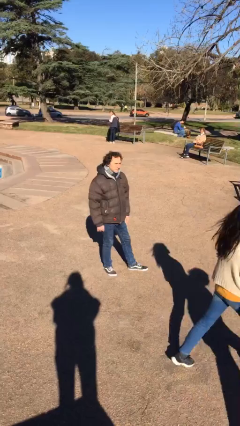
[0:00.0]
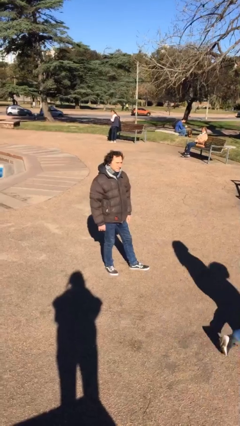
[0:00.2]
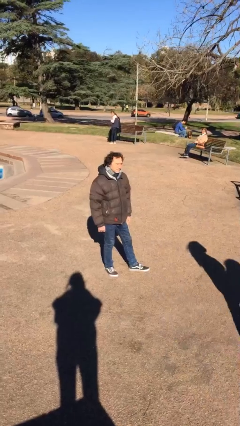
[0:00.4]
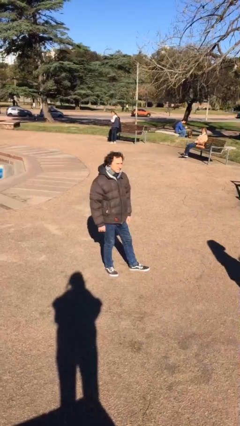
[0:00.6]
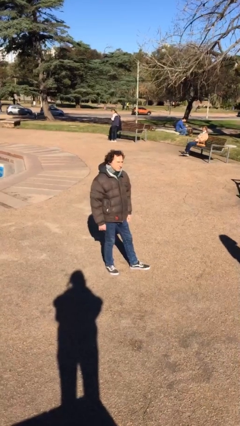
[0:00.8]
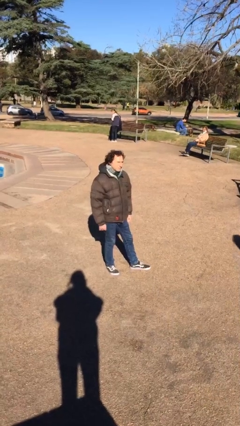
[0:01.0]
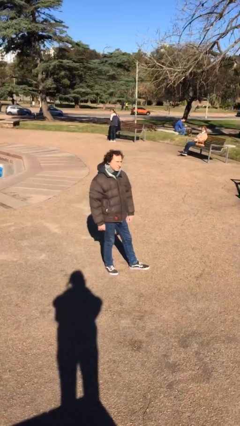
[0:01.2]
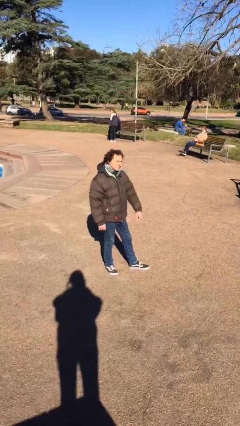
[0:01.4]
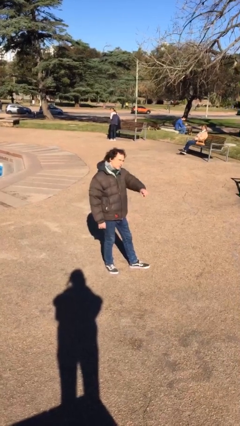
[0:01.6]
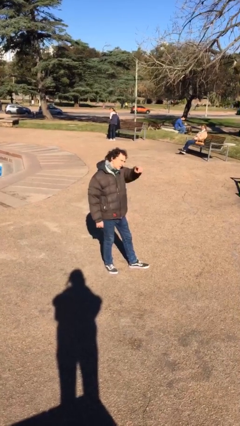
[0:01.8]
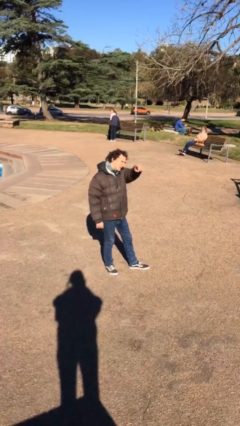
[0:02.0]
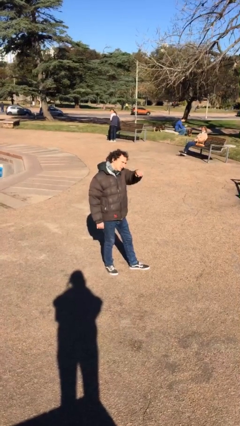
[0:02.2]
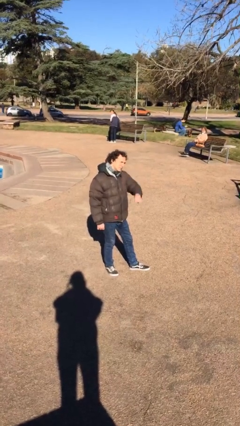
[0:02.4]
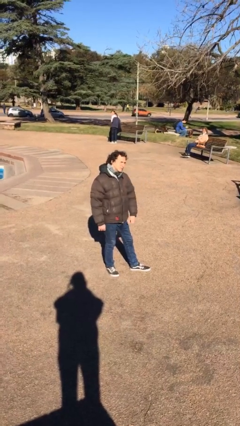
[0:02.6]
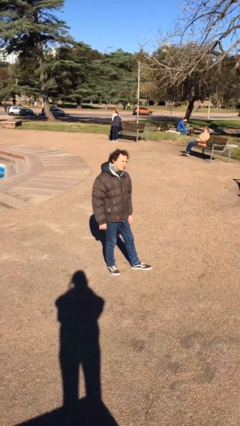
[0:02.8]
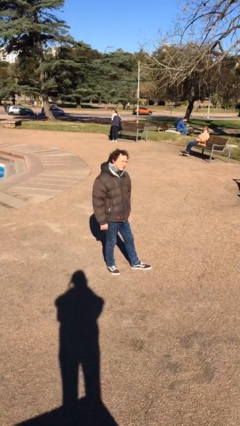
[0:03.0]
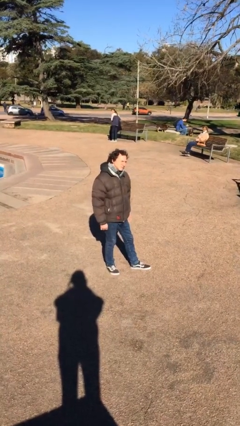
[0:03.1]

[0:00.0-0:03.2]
person points at person

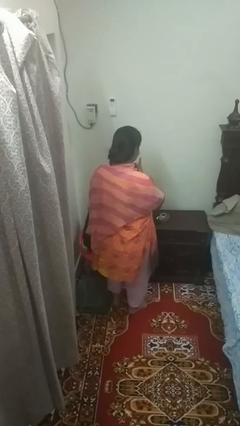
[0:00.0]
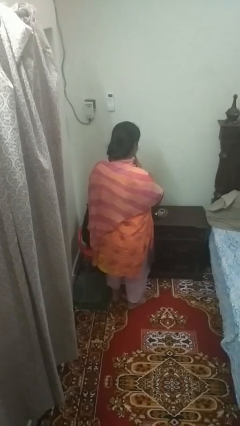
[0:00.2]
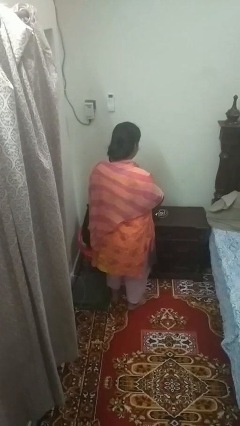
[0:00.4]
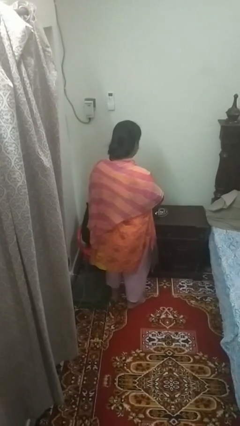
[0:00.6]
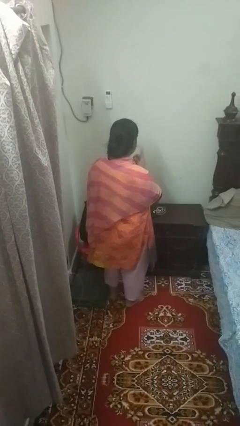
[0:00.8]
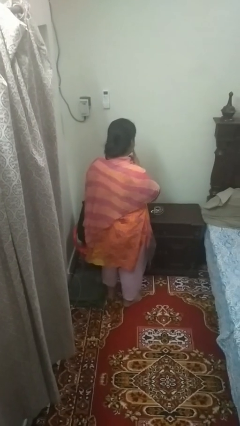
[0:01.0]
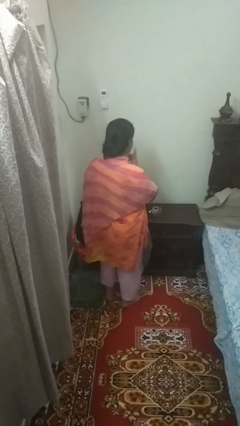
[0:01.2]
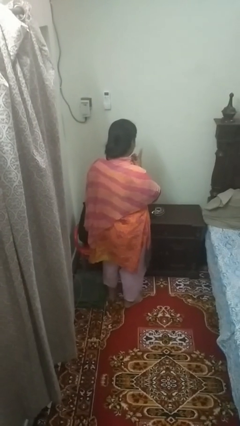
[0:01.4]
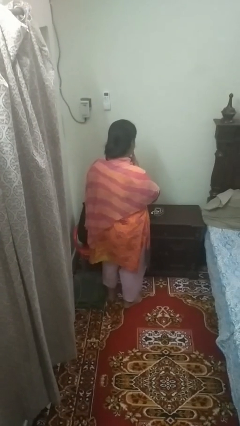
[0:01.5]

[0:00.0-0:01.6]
person strokes chin

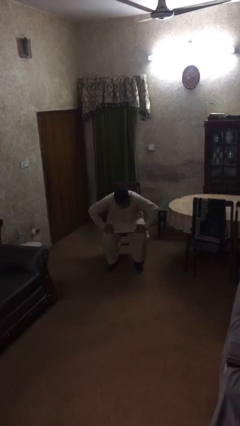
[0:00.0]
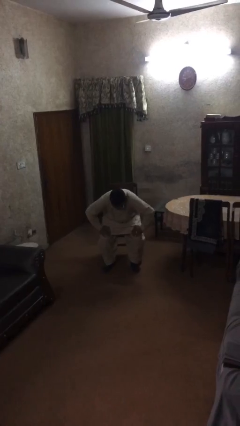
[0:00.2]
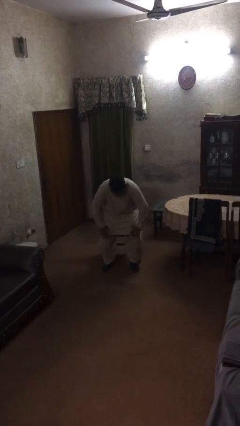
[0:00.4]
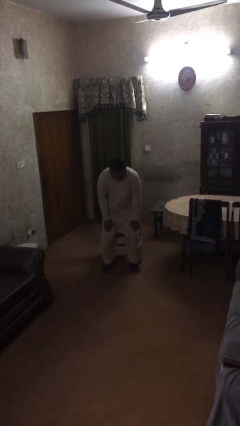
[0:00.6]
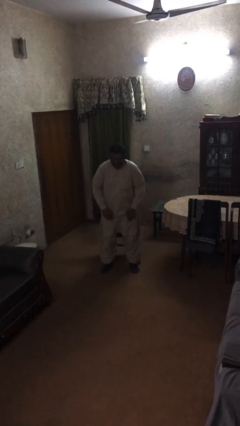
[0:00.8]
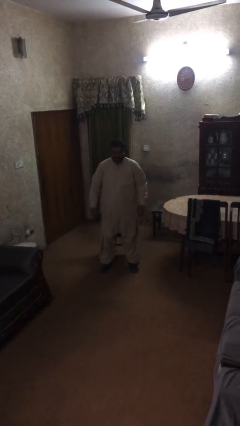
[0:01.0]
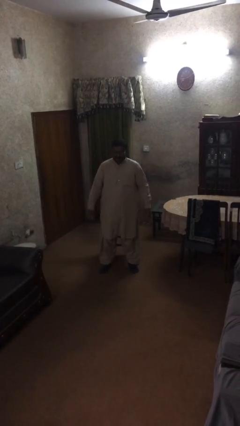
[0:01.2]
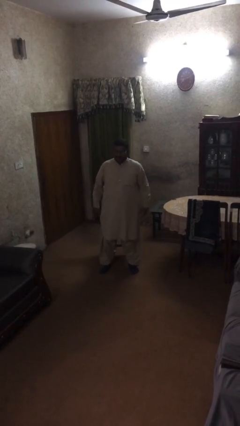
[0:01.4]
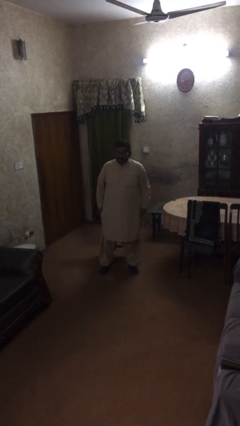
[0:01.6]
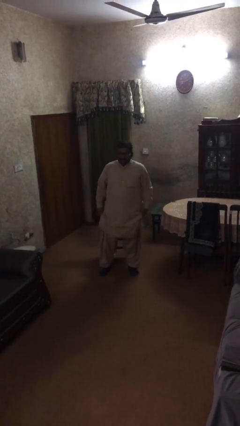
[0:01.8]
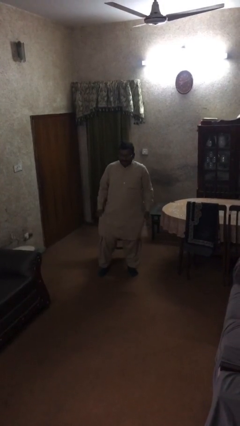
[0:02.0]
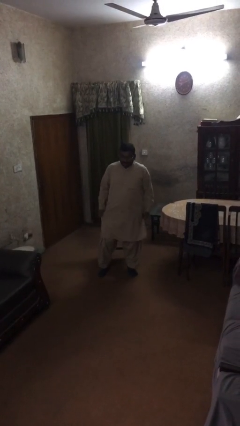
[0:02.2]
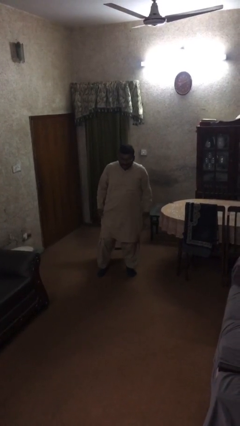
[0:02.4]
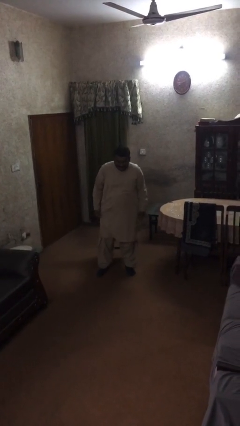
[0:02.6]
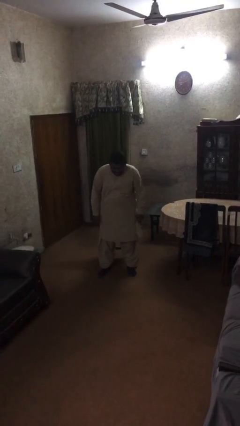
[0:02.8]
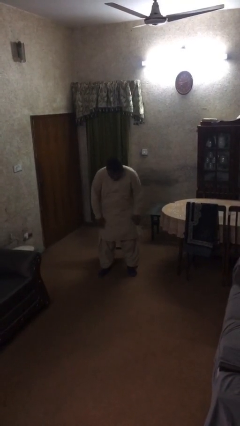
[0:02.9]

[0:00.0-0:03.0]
person stands up

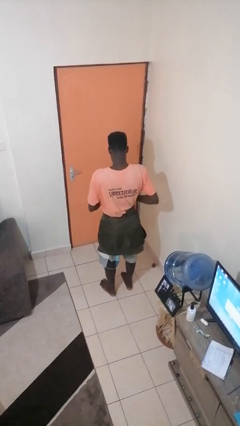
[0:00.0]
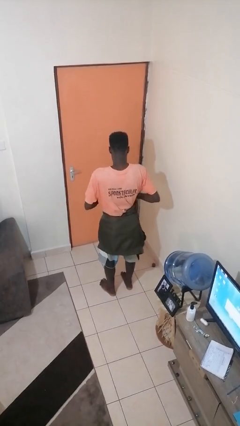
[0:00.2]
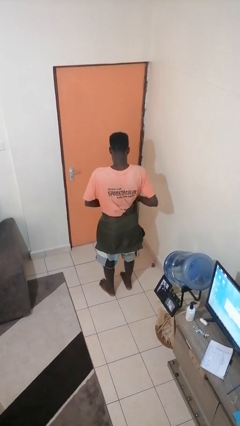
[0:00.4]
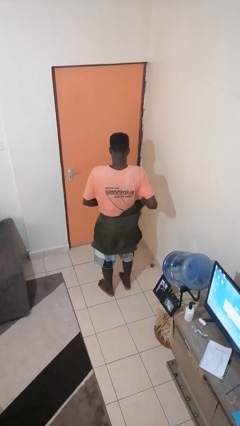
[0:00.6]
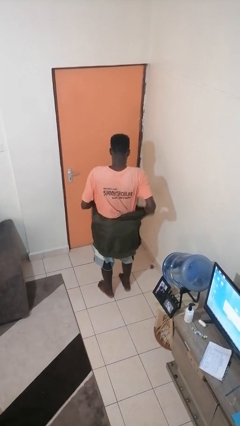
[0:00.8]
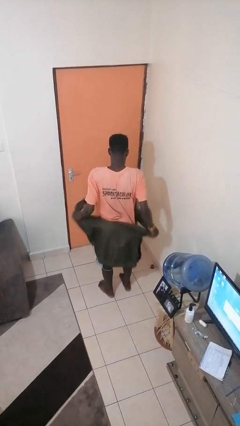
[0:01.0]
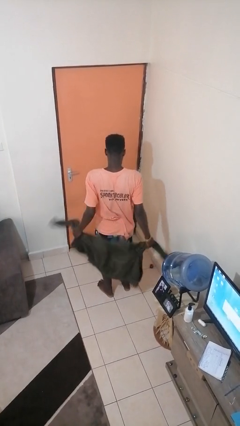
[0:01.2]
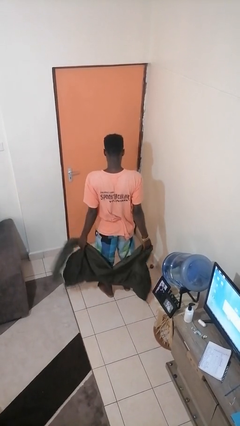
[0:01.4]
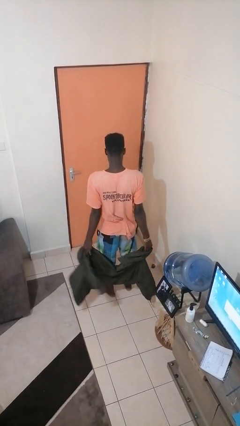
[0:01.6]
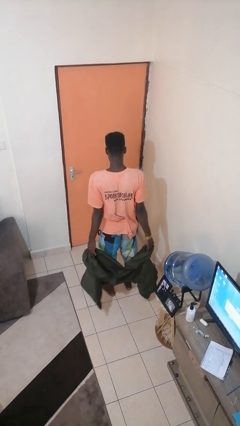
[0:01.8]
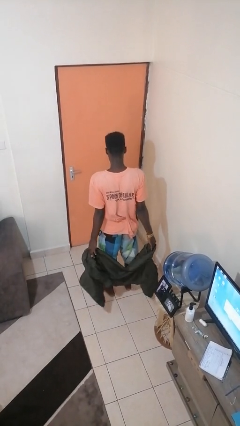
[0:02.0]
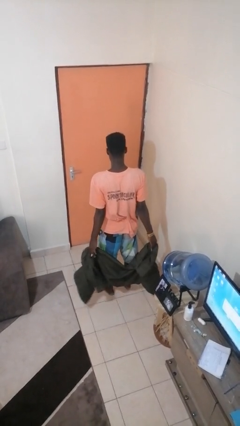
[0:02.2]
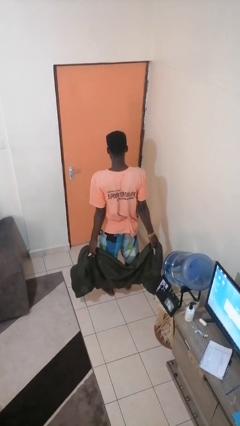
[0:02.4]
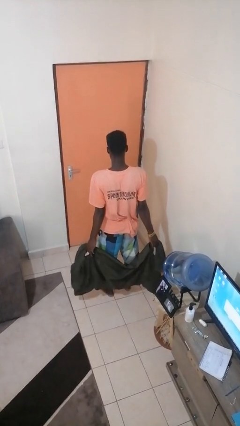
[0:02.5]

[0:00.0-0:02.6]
person unties jacket around waist

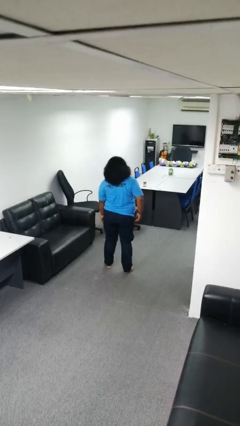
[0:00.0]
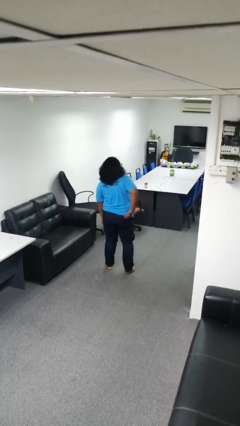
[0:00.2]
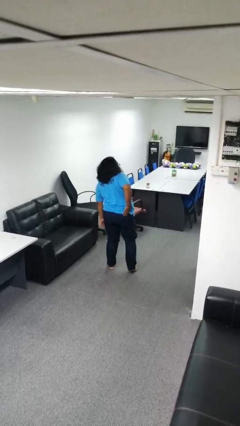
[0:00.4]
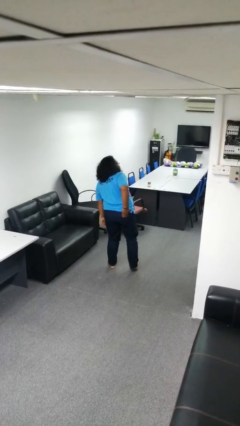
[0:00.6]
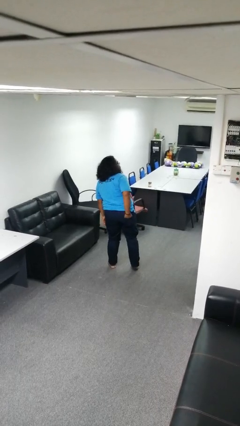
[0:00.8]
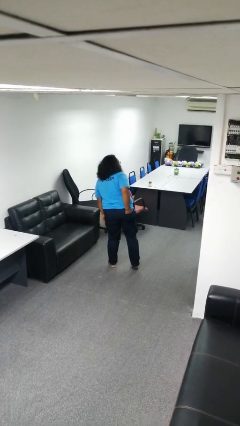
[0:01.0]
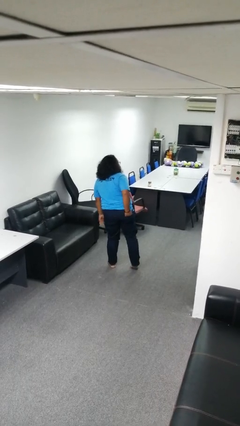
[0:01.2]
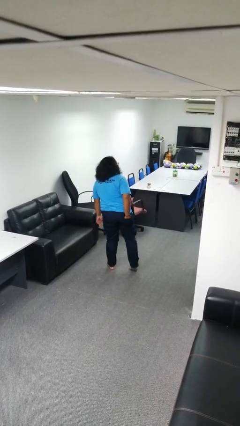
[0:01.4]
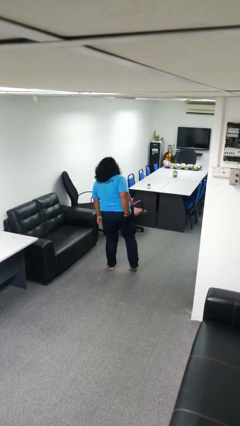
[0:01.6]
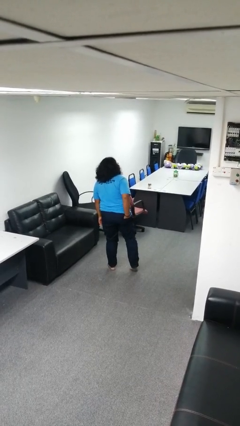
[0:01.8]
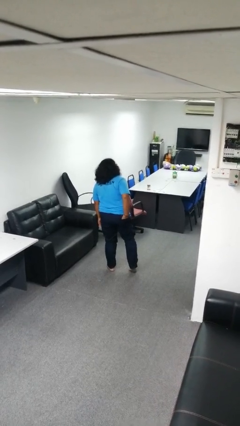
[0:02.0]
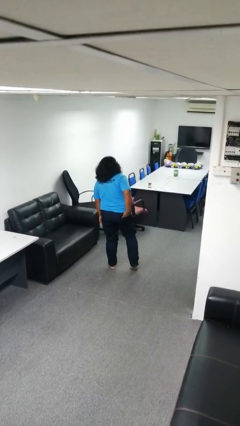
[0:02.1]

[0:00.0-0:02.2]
person puts hands in back pockets

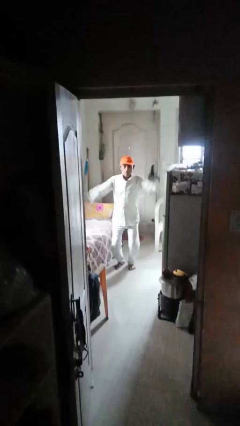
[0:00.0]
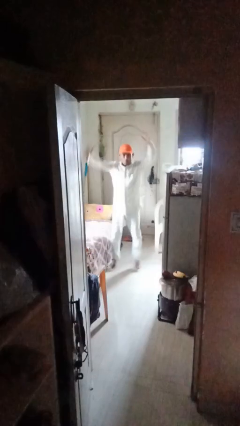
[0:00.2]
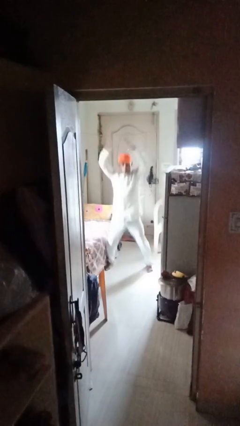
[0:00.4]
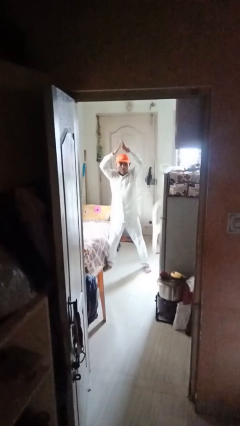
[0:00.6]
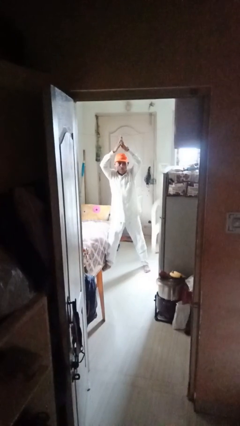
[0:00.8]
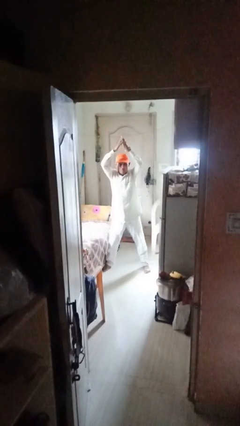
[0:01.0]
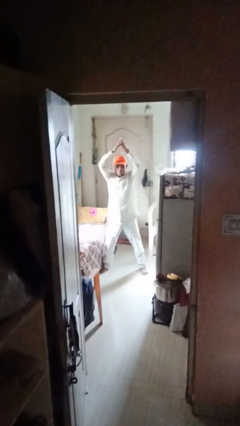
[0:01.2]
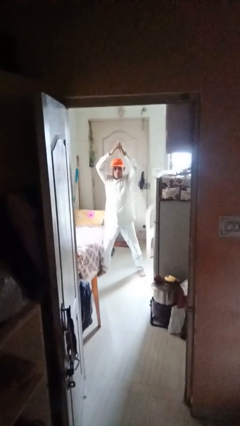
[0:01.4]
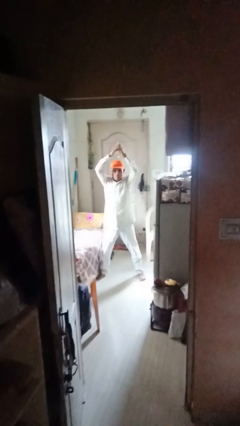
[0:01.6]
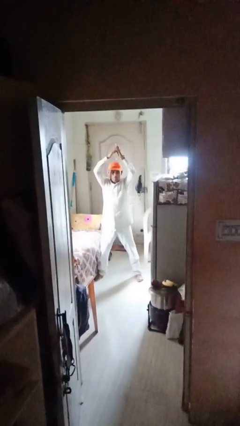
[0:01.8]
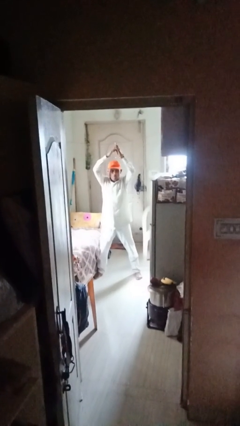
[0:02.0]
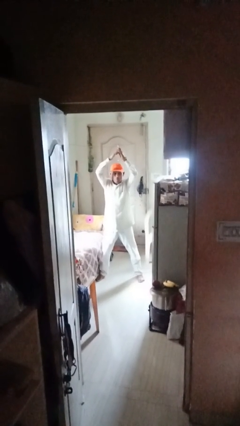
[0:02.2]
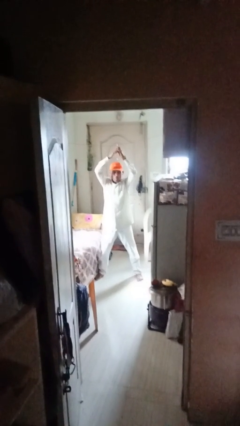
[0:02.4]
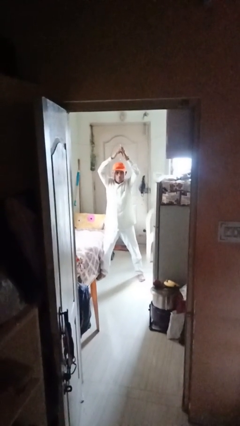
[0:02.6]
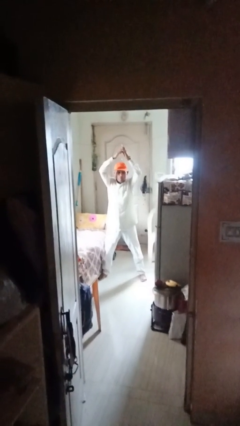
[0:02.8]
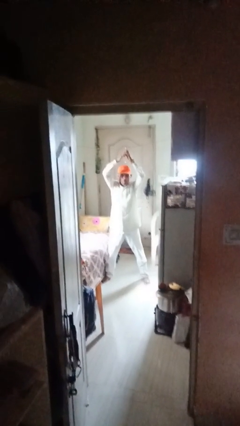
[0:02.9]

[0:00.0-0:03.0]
person exercises with jumping jacks

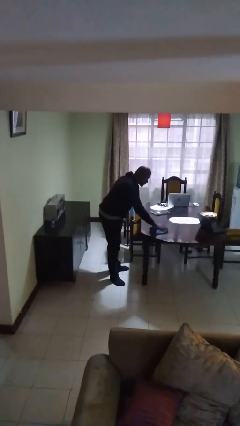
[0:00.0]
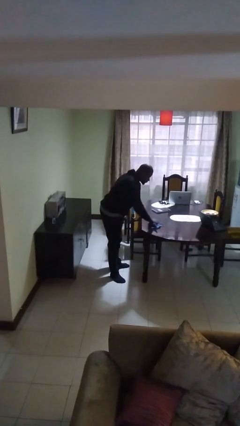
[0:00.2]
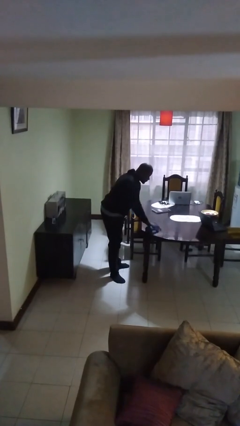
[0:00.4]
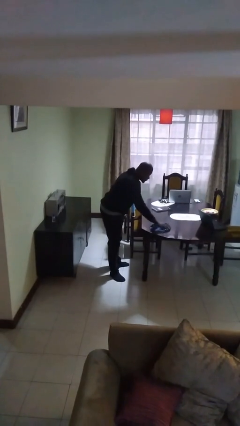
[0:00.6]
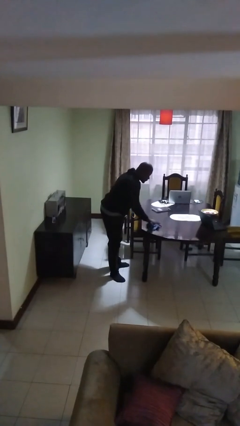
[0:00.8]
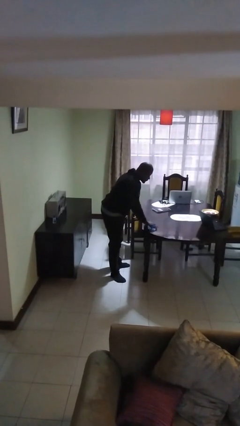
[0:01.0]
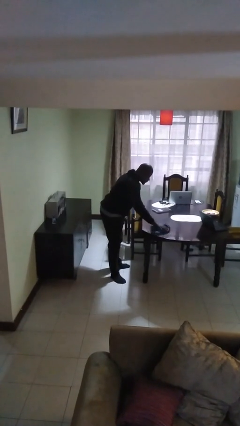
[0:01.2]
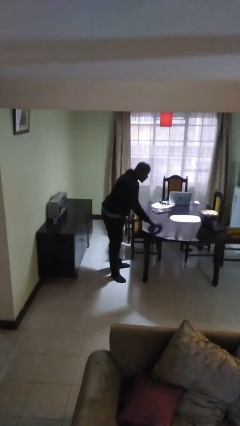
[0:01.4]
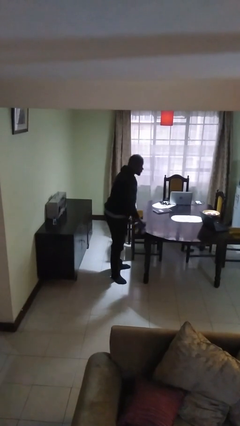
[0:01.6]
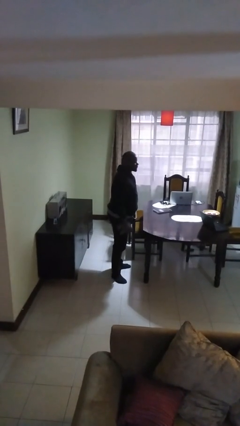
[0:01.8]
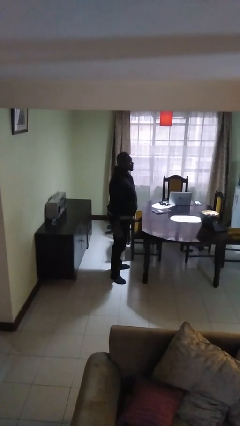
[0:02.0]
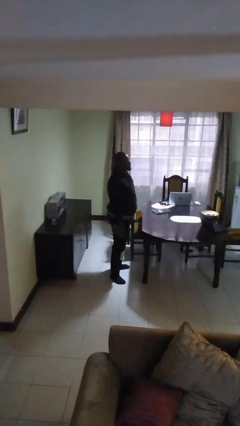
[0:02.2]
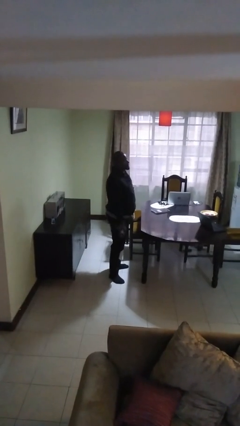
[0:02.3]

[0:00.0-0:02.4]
person cleans table with rag
